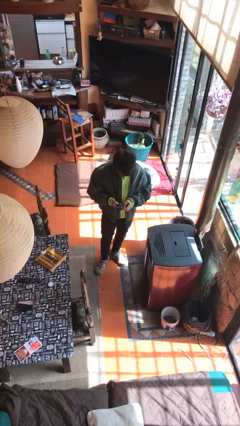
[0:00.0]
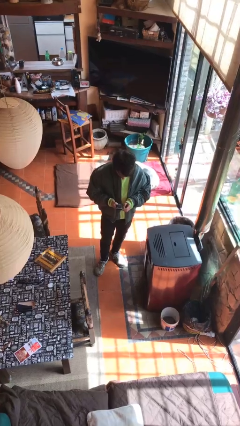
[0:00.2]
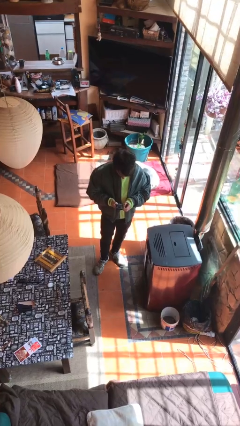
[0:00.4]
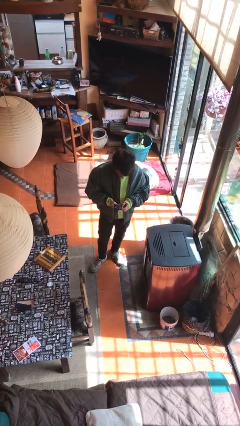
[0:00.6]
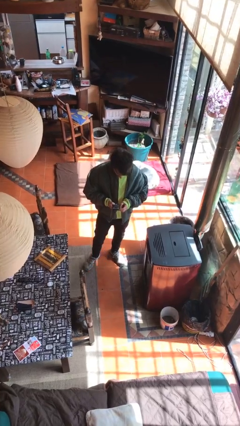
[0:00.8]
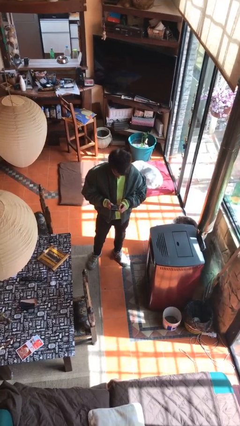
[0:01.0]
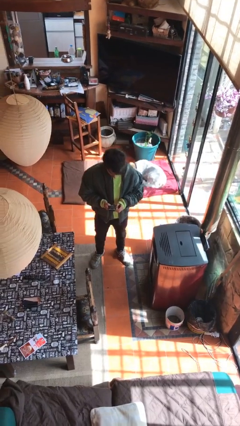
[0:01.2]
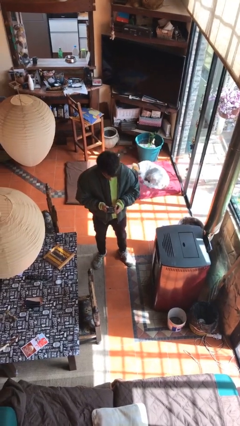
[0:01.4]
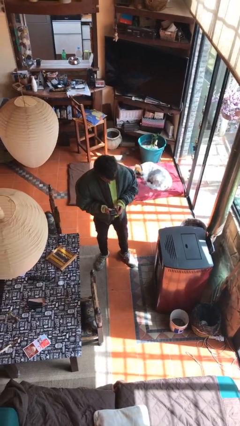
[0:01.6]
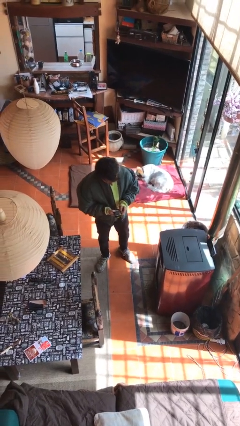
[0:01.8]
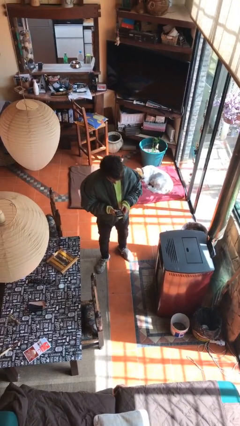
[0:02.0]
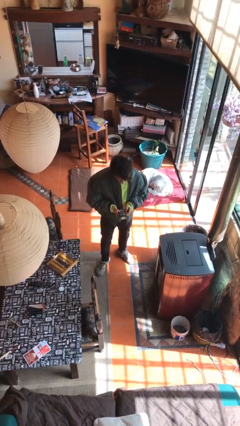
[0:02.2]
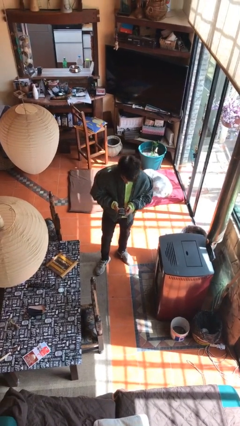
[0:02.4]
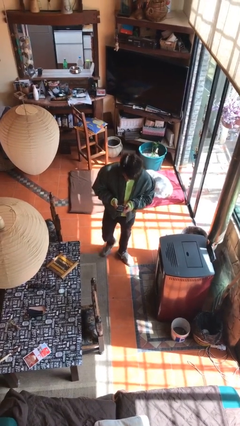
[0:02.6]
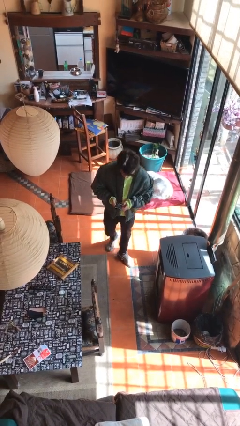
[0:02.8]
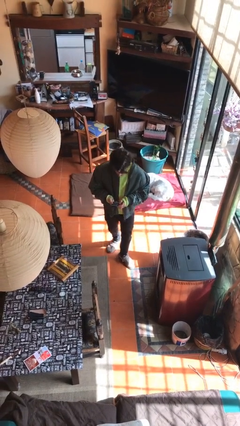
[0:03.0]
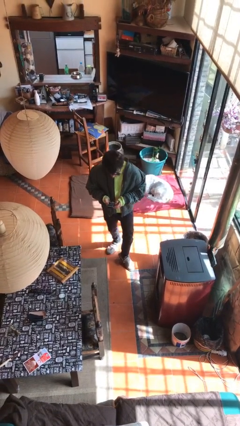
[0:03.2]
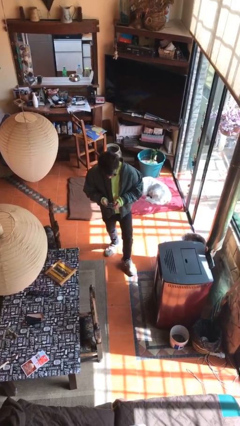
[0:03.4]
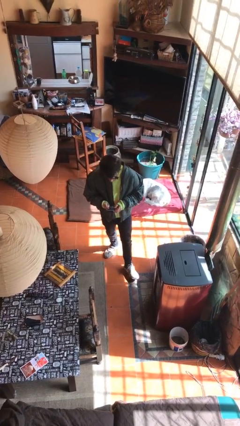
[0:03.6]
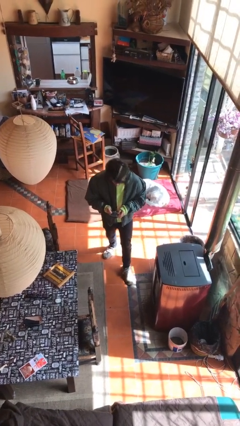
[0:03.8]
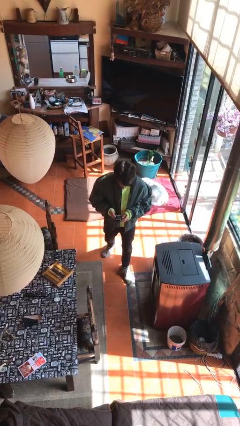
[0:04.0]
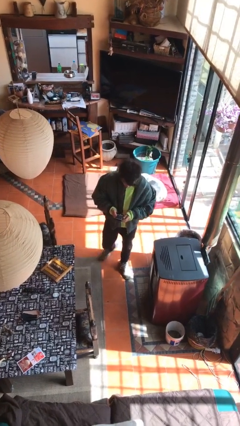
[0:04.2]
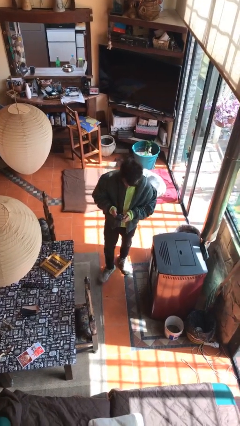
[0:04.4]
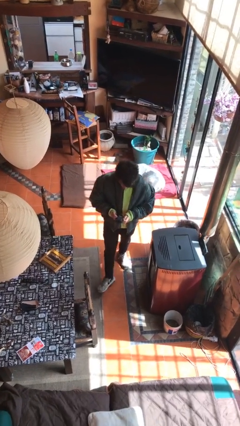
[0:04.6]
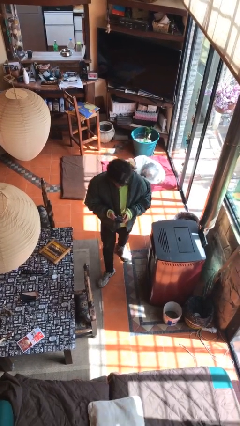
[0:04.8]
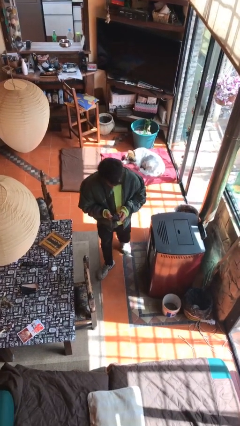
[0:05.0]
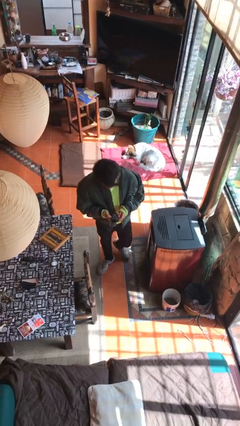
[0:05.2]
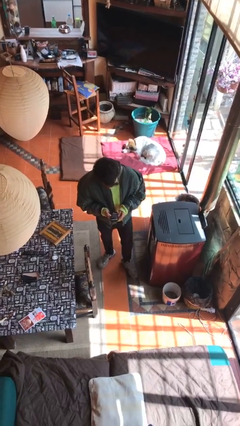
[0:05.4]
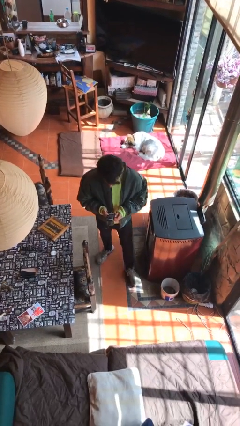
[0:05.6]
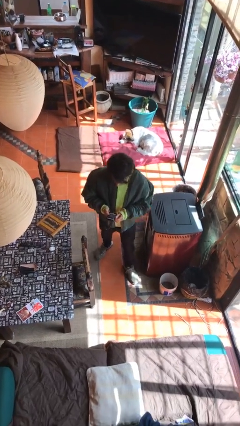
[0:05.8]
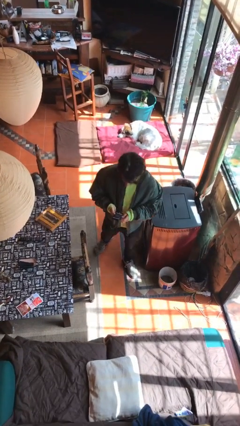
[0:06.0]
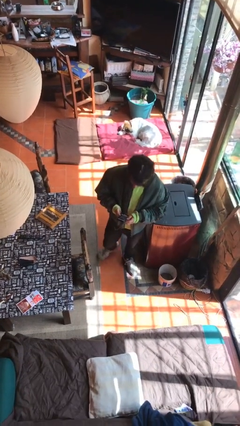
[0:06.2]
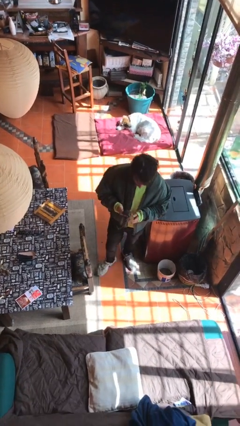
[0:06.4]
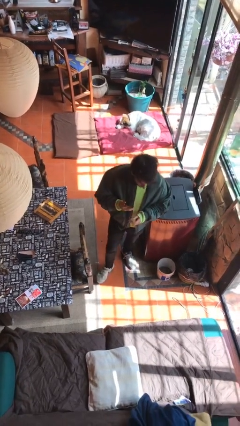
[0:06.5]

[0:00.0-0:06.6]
person texts on phone

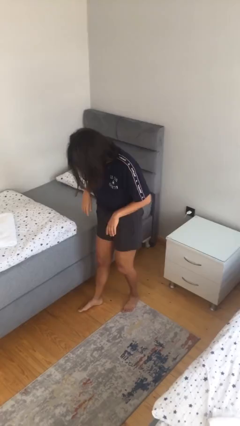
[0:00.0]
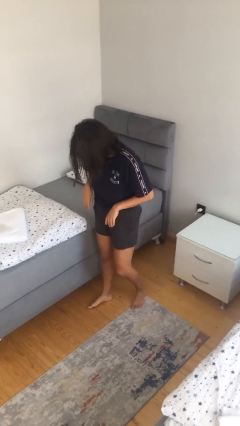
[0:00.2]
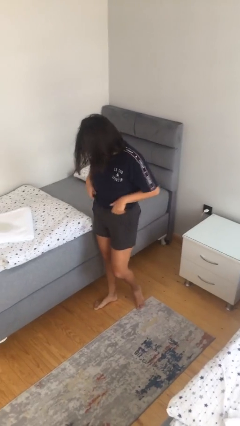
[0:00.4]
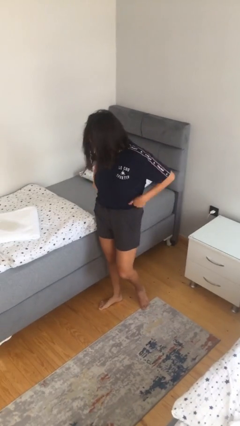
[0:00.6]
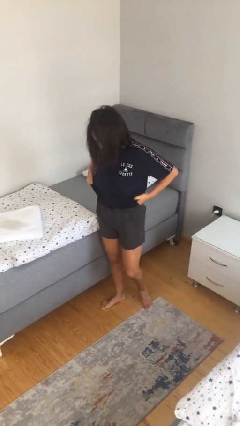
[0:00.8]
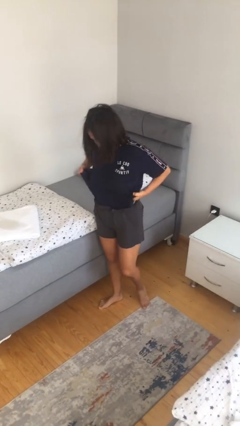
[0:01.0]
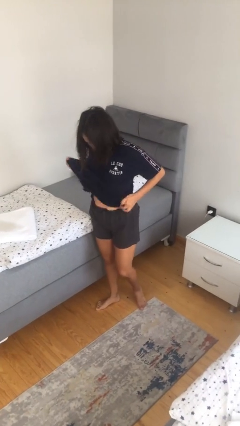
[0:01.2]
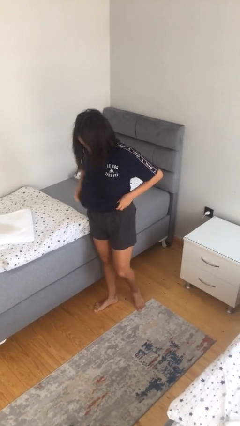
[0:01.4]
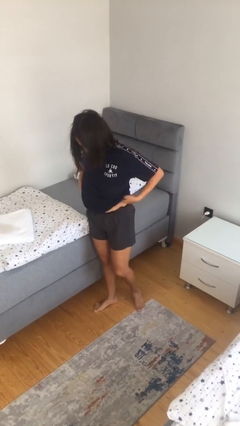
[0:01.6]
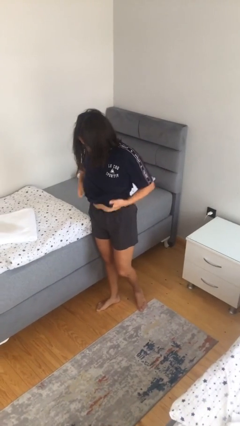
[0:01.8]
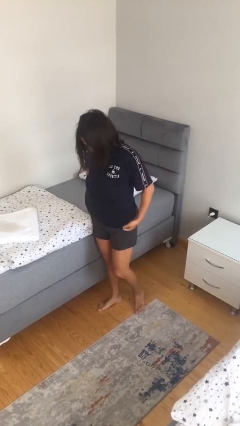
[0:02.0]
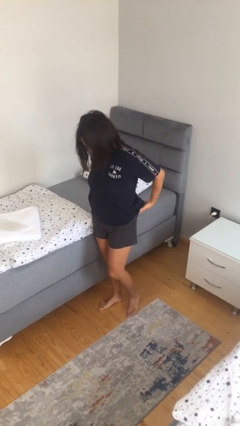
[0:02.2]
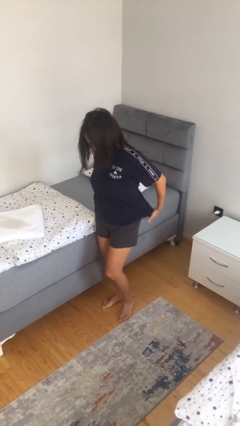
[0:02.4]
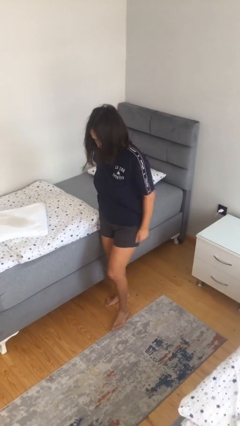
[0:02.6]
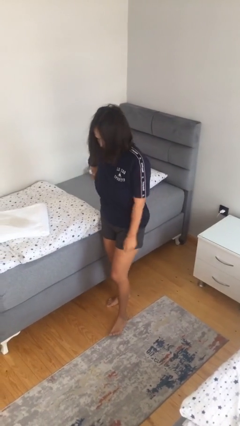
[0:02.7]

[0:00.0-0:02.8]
person untucks shirt

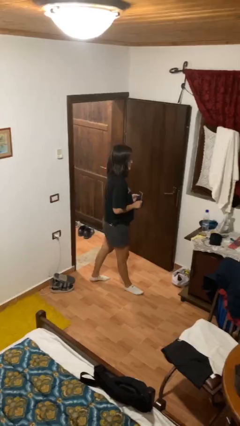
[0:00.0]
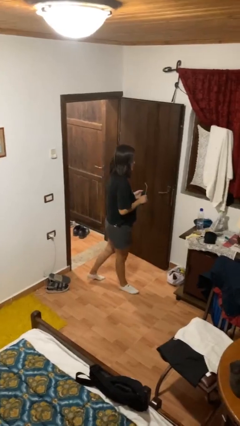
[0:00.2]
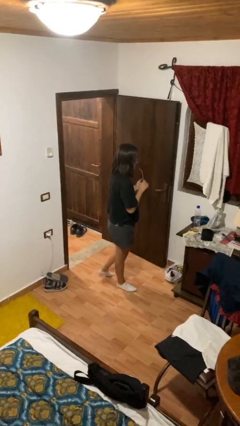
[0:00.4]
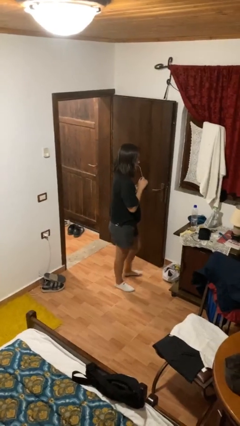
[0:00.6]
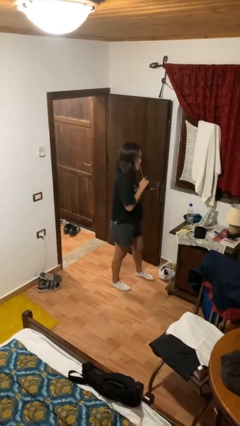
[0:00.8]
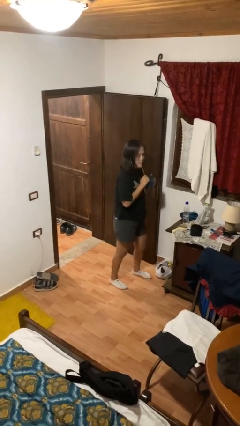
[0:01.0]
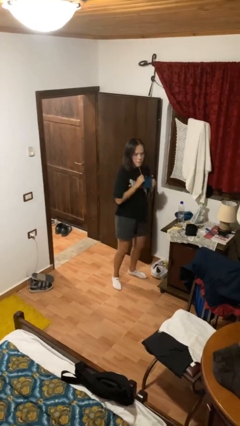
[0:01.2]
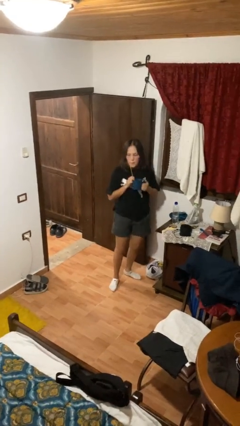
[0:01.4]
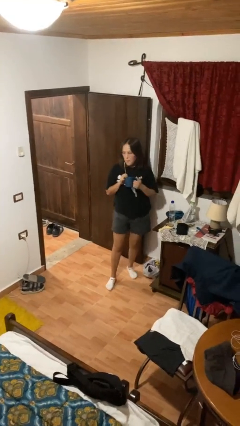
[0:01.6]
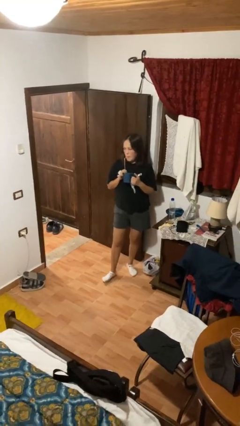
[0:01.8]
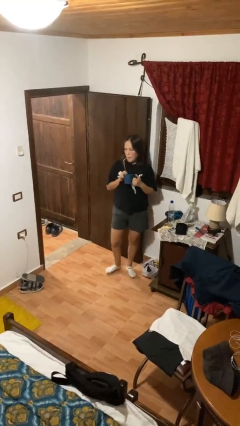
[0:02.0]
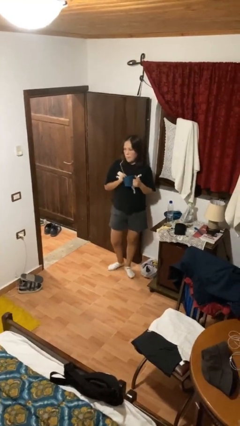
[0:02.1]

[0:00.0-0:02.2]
person drinks from straw

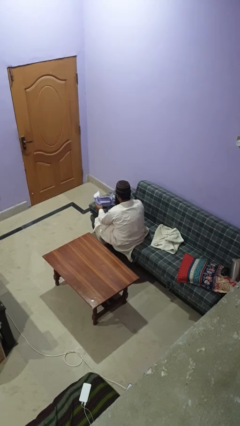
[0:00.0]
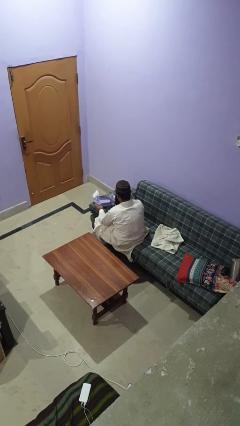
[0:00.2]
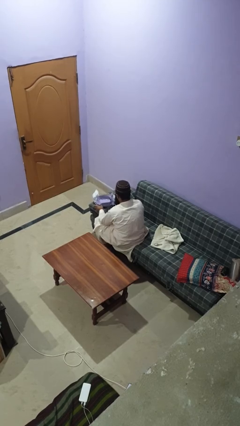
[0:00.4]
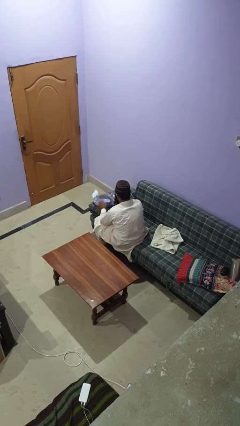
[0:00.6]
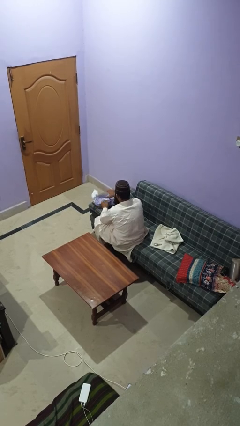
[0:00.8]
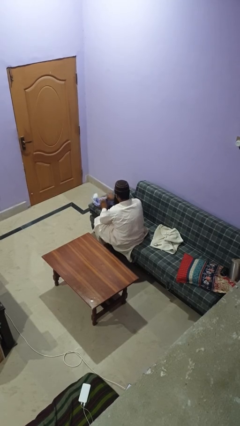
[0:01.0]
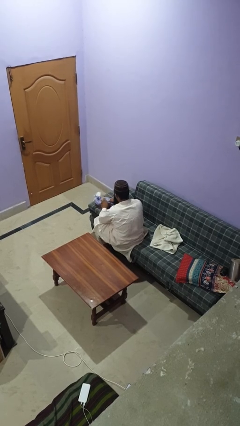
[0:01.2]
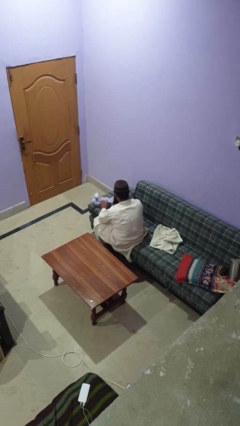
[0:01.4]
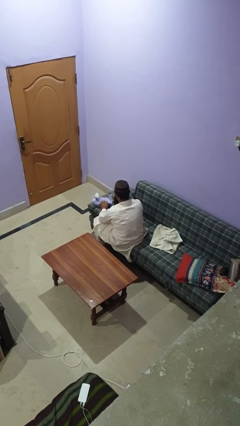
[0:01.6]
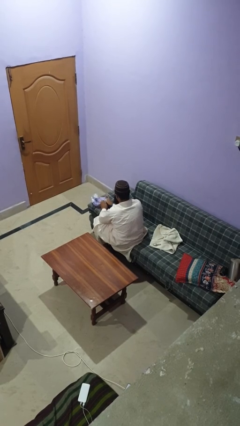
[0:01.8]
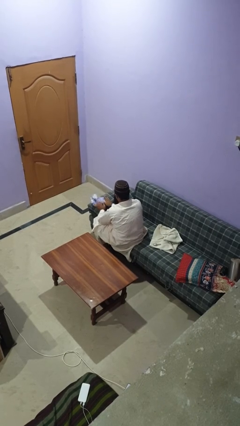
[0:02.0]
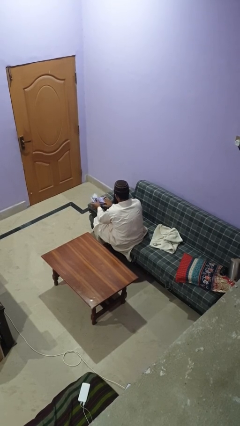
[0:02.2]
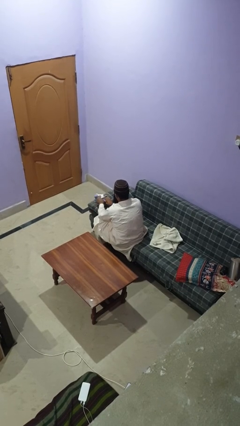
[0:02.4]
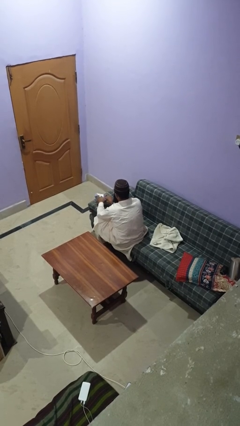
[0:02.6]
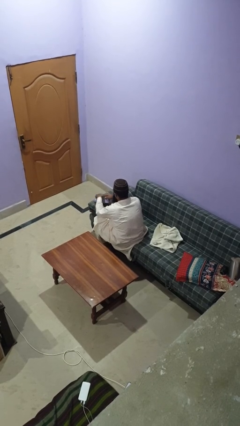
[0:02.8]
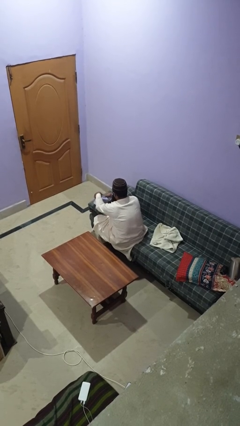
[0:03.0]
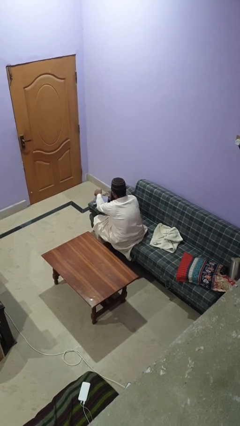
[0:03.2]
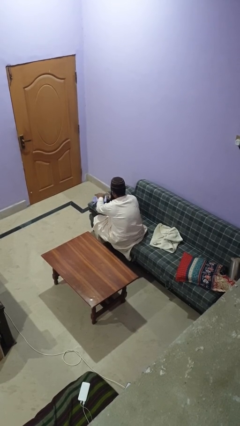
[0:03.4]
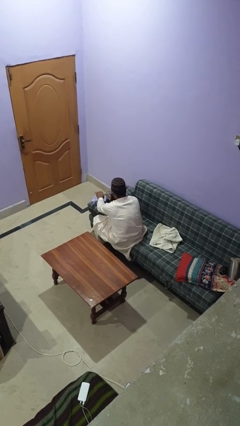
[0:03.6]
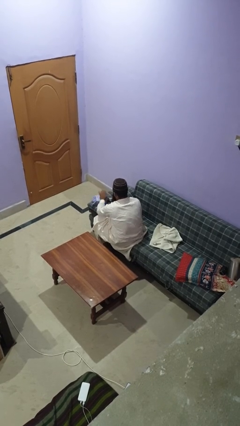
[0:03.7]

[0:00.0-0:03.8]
person wraps box

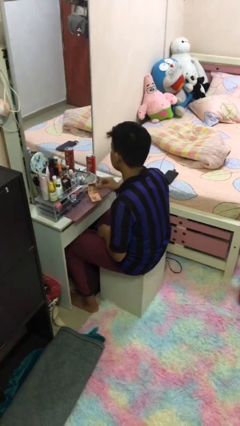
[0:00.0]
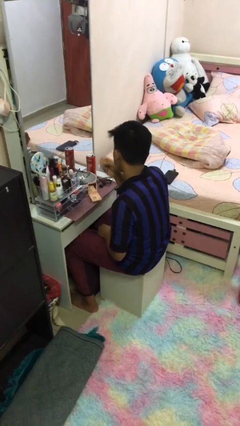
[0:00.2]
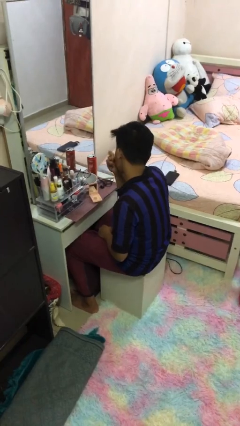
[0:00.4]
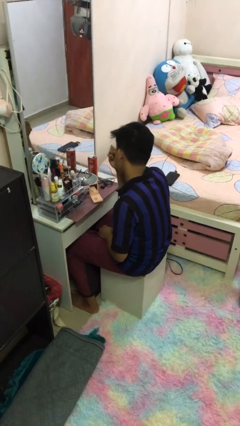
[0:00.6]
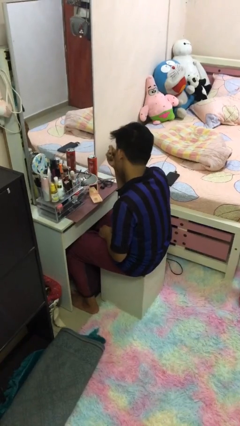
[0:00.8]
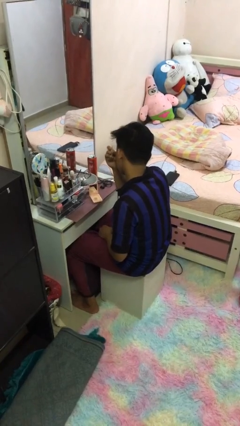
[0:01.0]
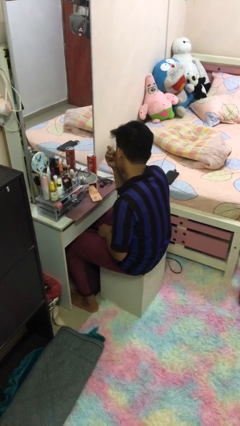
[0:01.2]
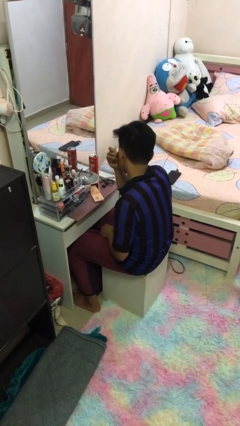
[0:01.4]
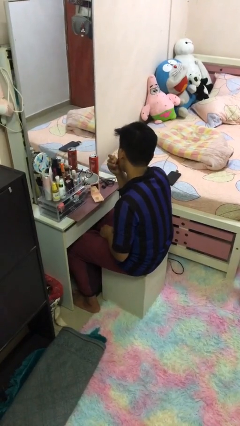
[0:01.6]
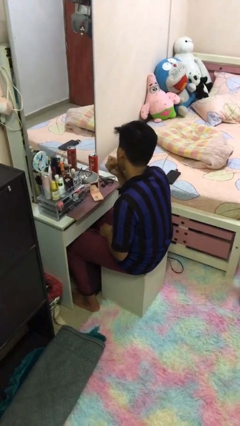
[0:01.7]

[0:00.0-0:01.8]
person applies foundation makeup
